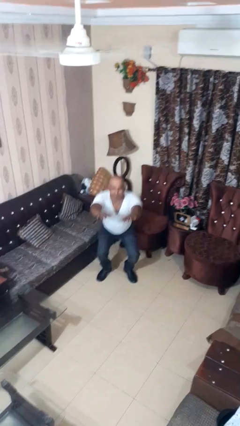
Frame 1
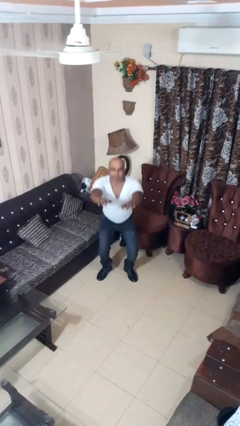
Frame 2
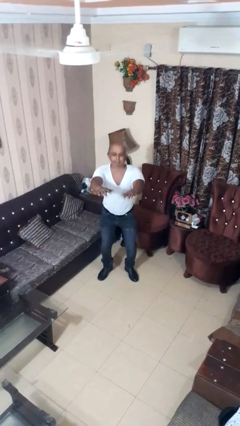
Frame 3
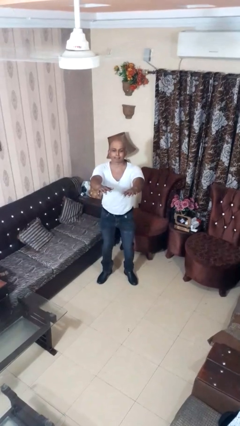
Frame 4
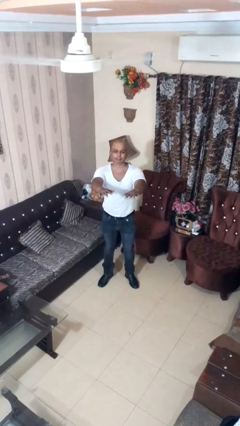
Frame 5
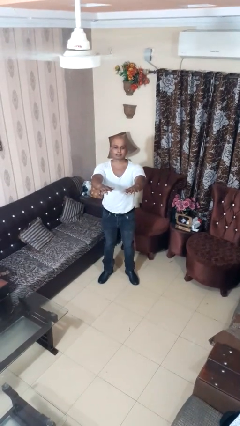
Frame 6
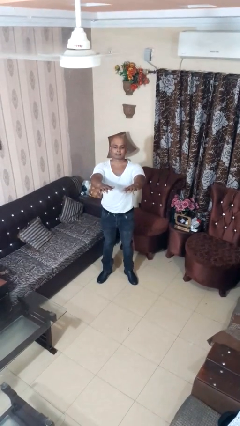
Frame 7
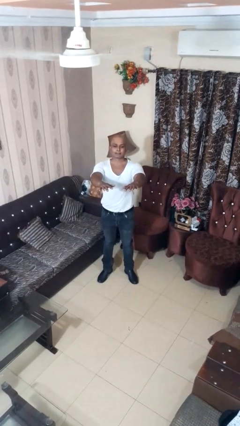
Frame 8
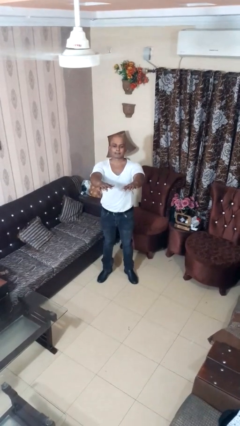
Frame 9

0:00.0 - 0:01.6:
person stands up

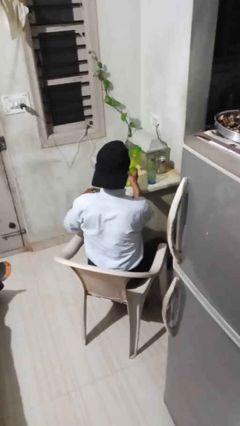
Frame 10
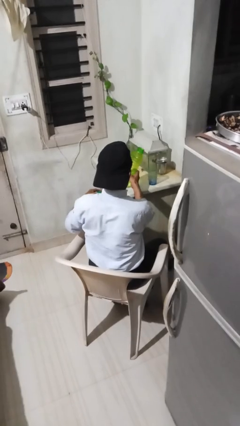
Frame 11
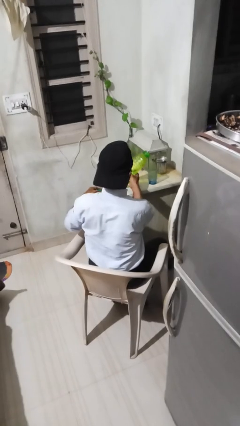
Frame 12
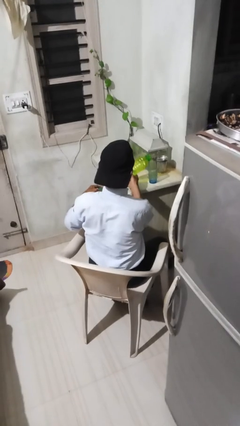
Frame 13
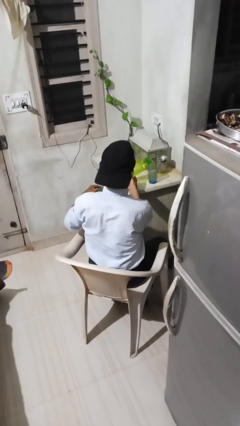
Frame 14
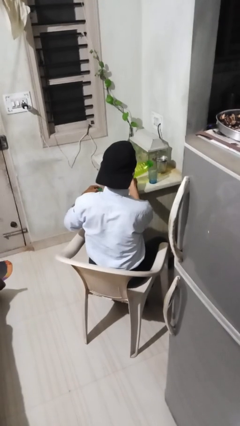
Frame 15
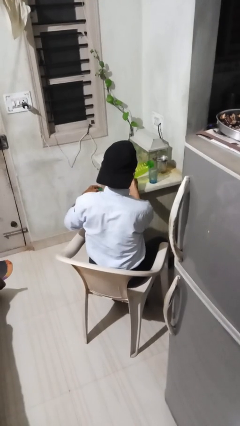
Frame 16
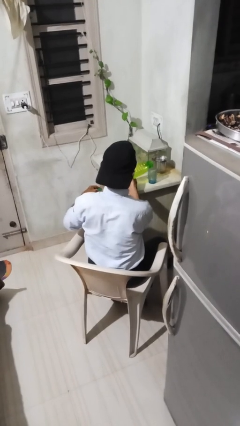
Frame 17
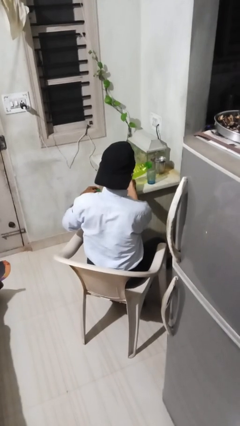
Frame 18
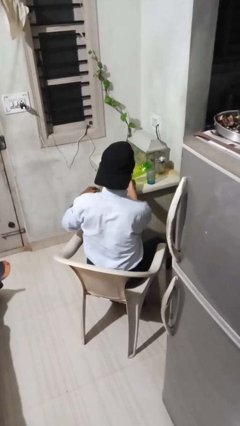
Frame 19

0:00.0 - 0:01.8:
person pours liquid into cup

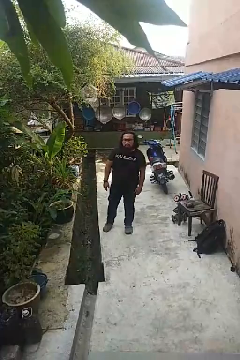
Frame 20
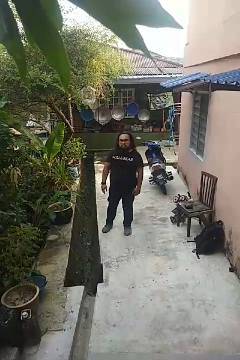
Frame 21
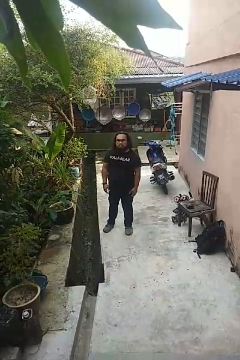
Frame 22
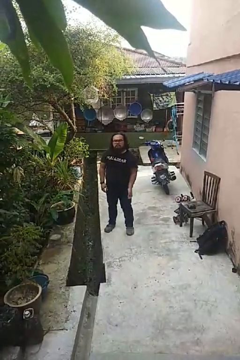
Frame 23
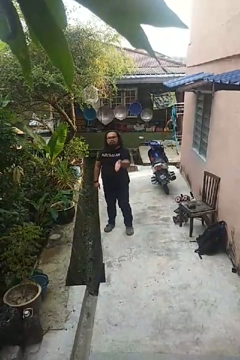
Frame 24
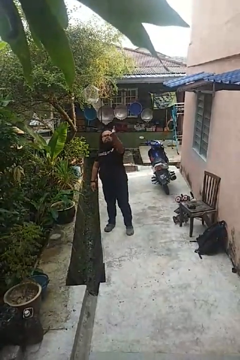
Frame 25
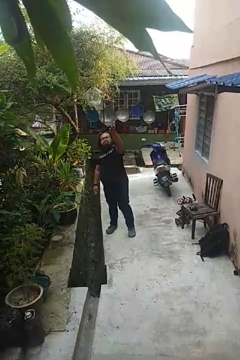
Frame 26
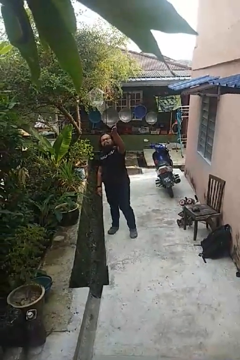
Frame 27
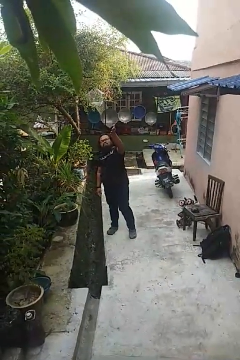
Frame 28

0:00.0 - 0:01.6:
person gestures swipe up

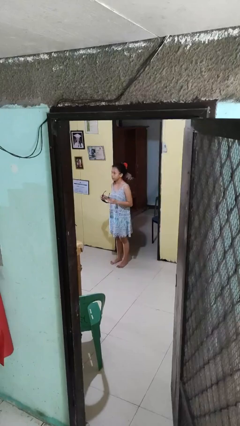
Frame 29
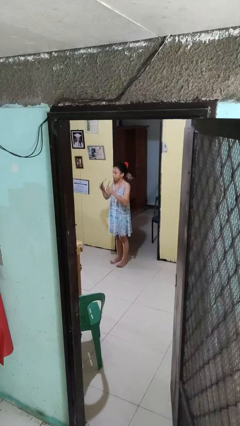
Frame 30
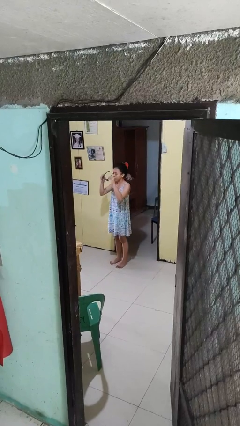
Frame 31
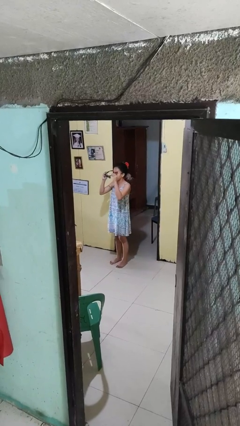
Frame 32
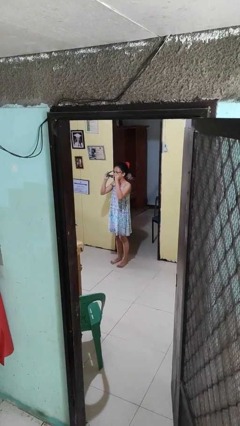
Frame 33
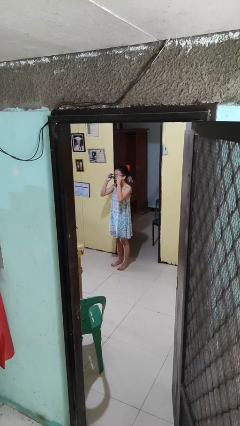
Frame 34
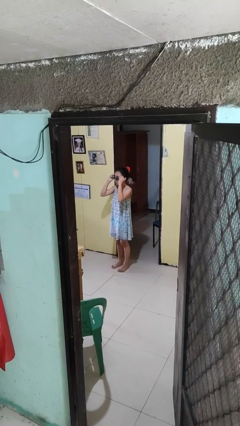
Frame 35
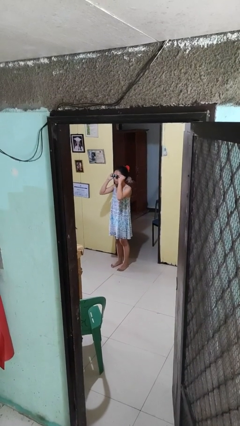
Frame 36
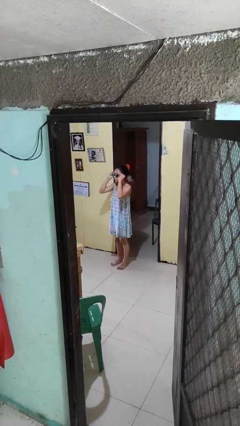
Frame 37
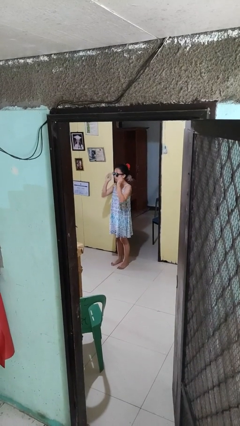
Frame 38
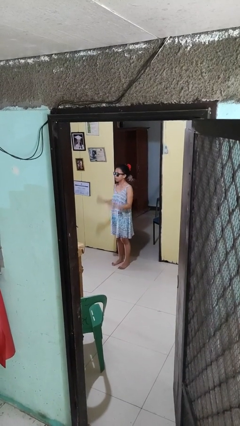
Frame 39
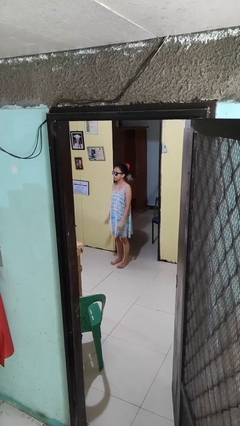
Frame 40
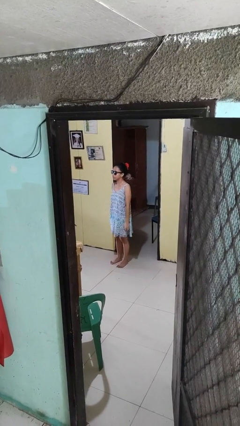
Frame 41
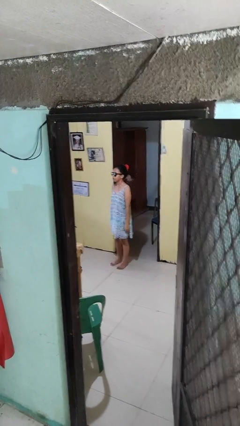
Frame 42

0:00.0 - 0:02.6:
person puts on sunglasses

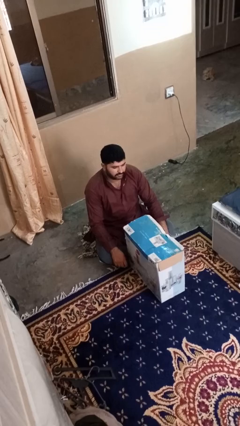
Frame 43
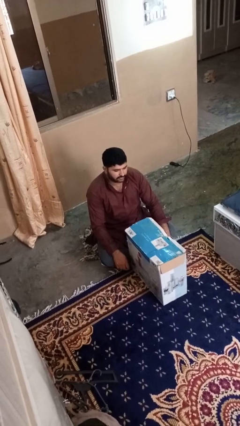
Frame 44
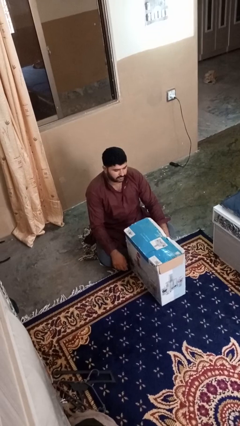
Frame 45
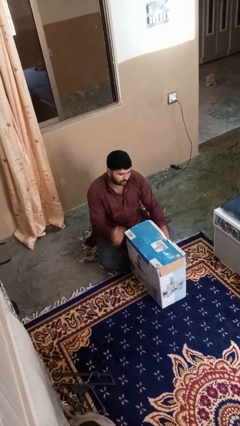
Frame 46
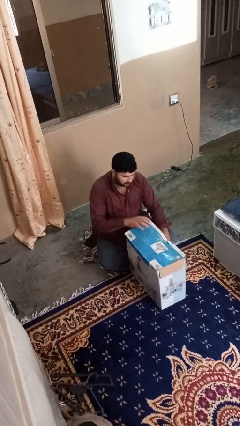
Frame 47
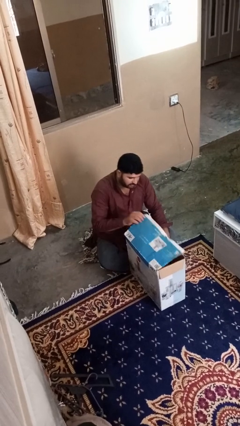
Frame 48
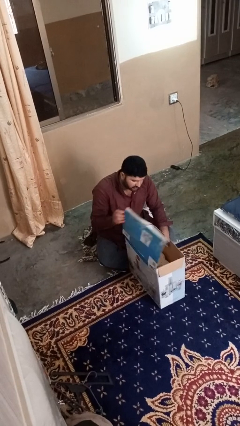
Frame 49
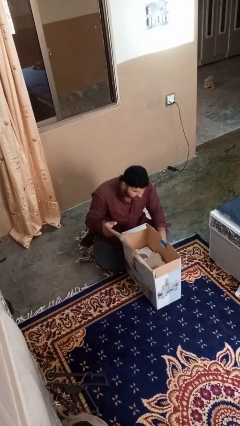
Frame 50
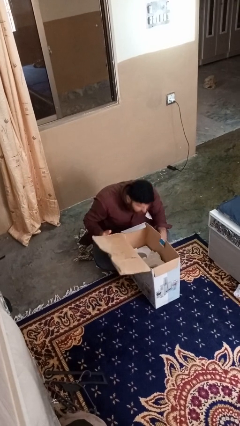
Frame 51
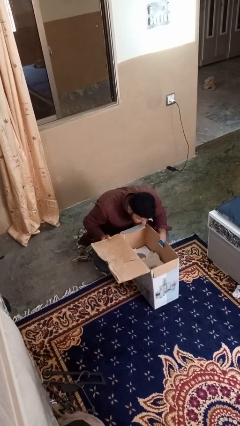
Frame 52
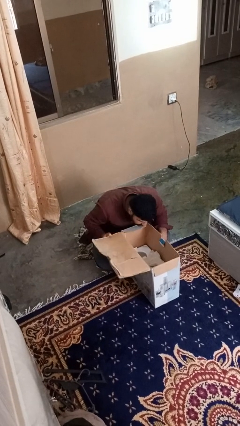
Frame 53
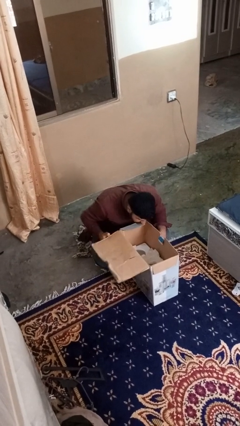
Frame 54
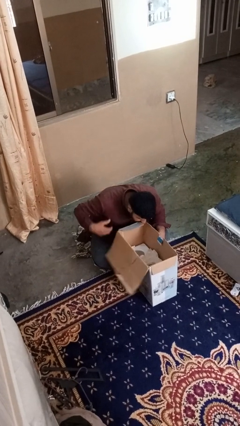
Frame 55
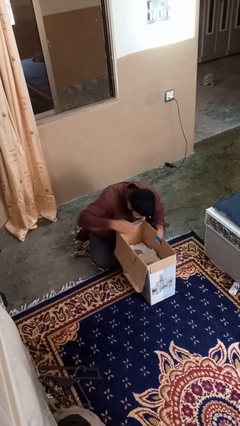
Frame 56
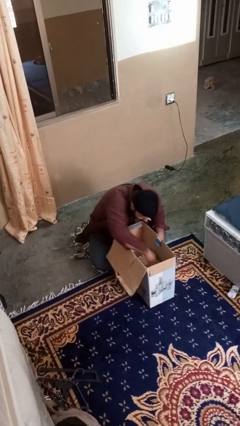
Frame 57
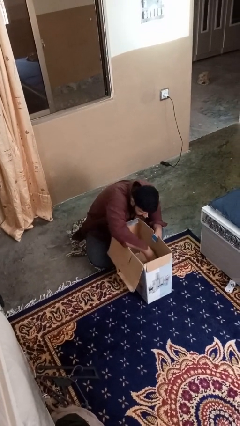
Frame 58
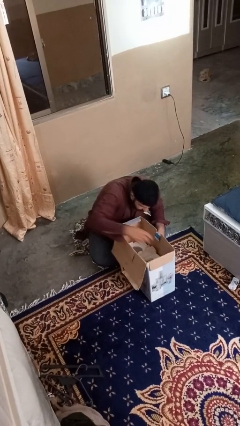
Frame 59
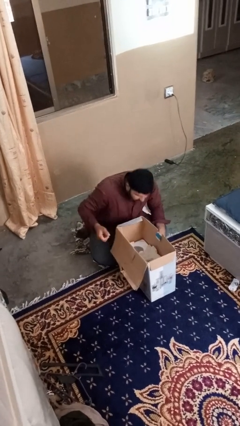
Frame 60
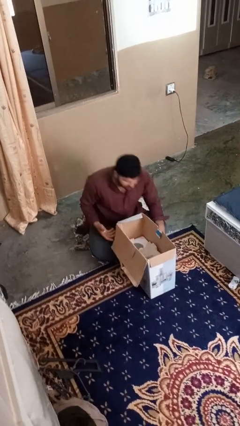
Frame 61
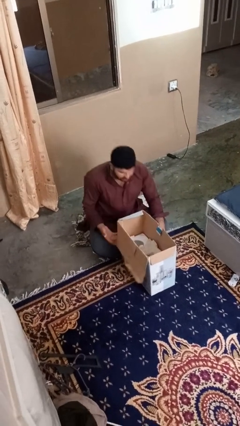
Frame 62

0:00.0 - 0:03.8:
person searches in box

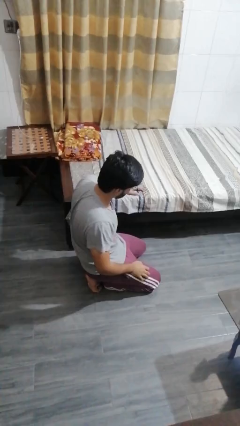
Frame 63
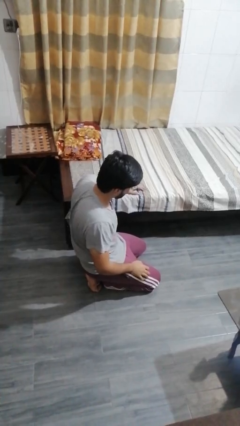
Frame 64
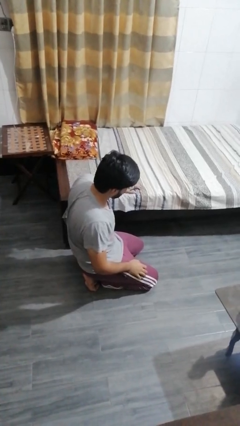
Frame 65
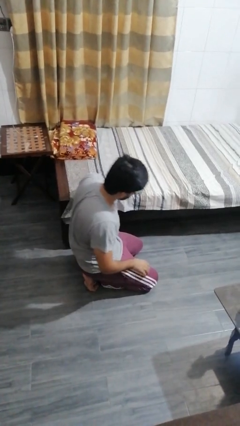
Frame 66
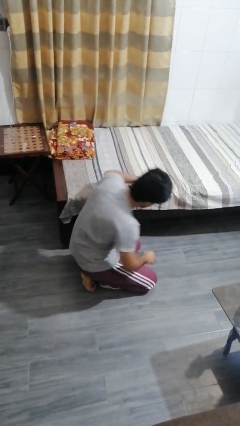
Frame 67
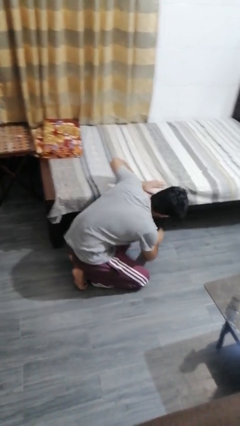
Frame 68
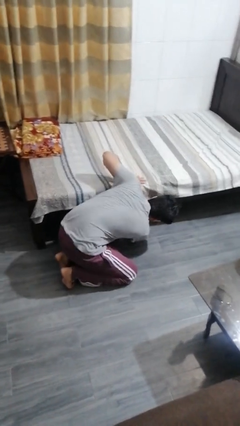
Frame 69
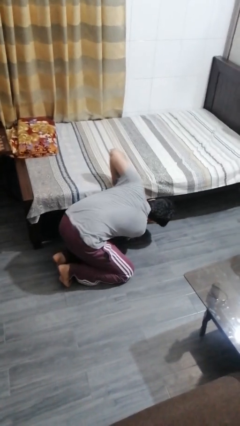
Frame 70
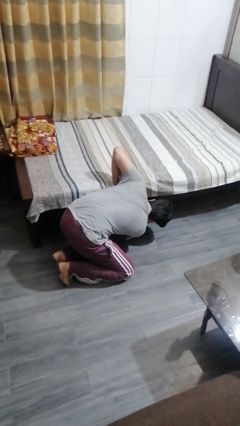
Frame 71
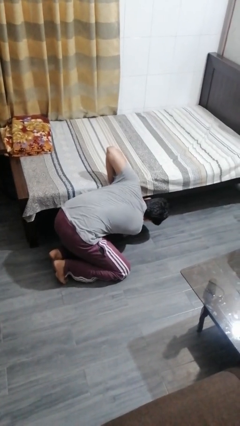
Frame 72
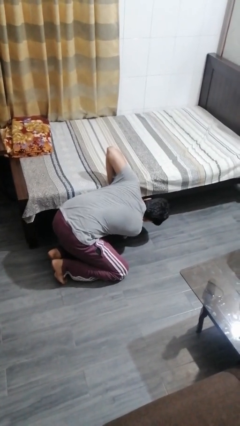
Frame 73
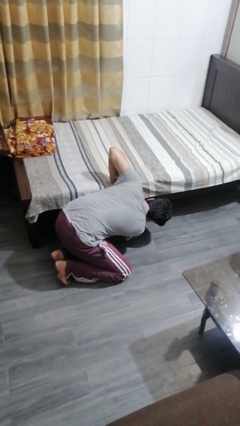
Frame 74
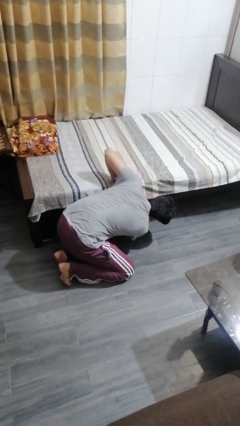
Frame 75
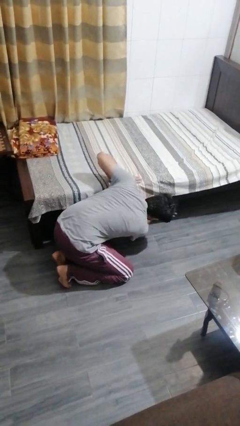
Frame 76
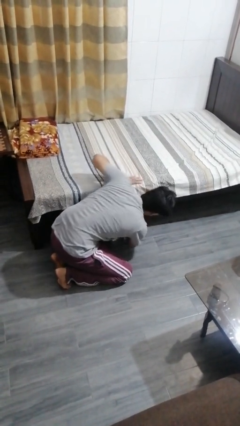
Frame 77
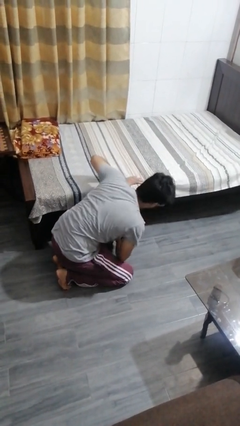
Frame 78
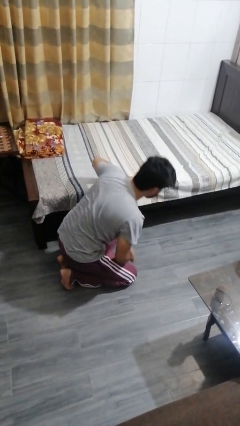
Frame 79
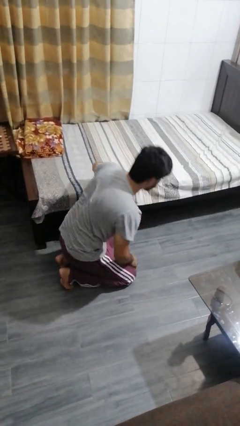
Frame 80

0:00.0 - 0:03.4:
person searches under bed

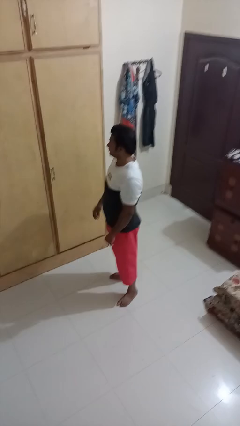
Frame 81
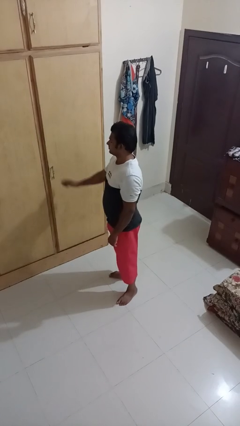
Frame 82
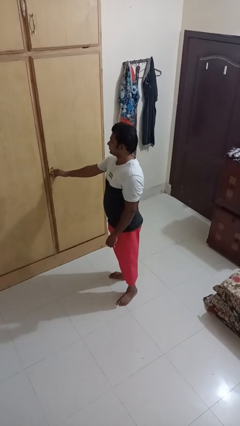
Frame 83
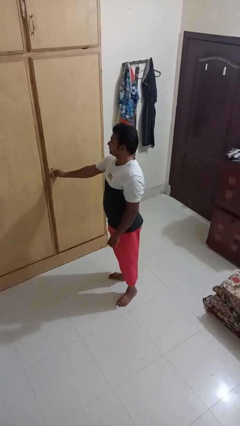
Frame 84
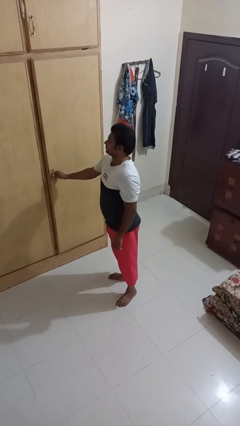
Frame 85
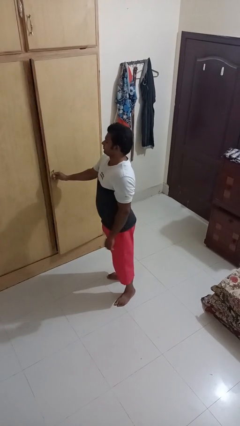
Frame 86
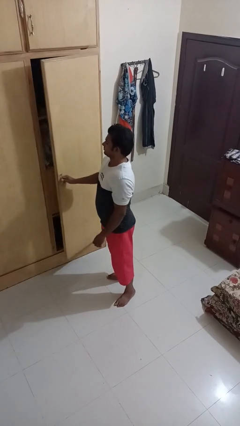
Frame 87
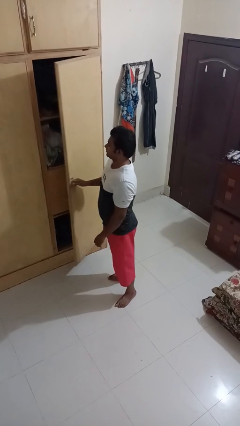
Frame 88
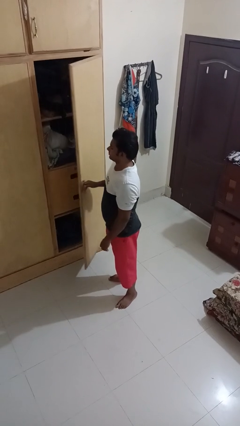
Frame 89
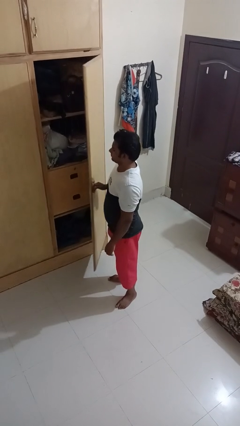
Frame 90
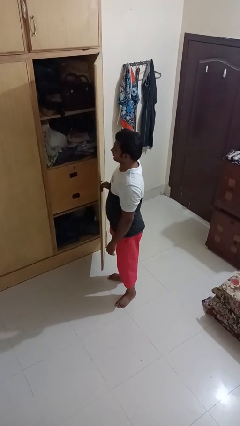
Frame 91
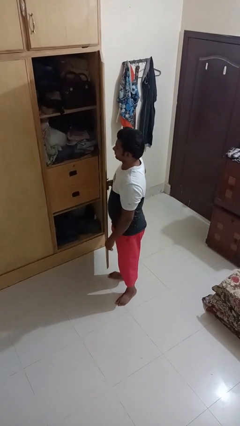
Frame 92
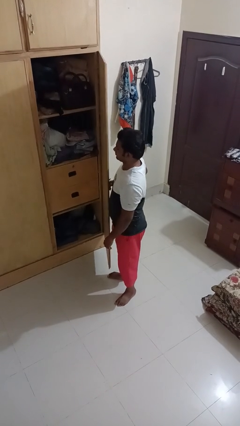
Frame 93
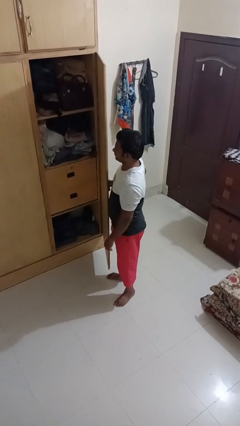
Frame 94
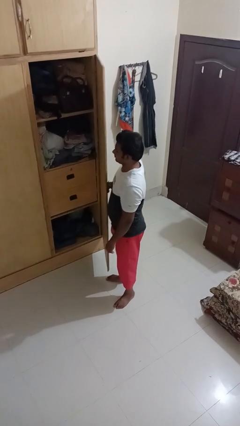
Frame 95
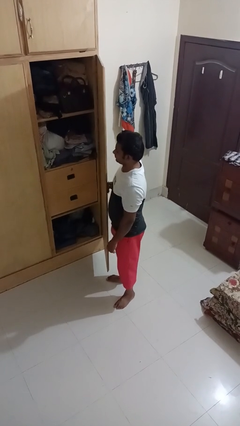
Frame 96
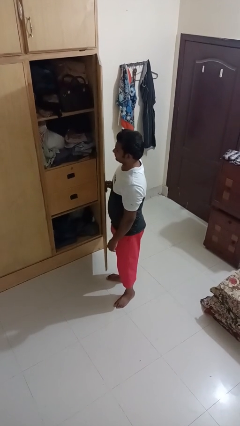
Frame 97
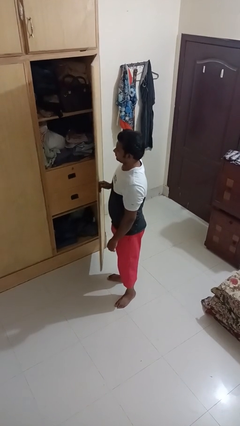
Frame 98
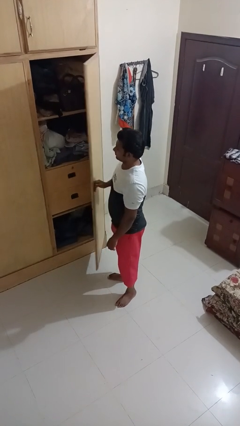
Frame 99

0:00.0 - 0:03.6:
person opens closet door
